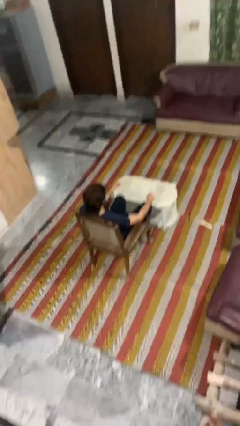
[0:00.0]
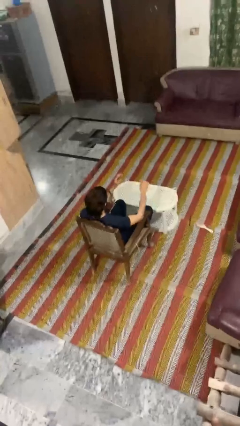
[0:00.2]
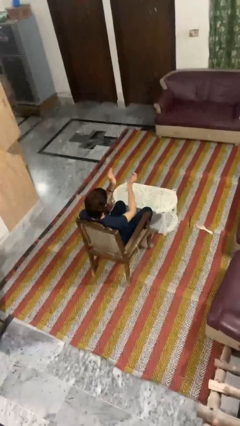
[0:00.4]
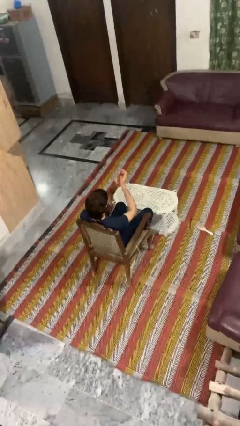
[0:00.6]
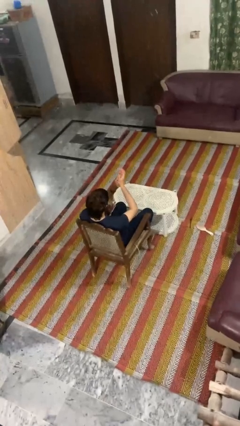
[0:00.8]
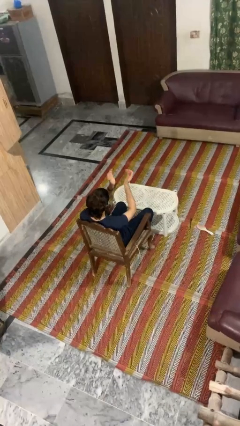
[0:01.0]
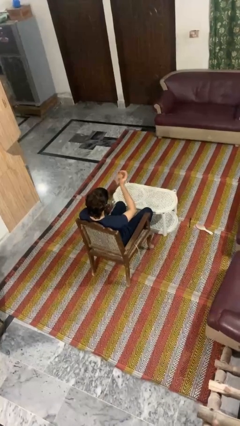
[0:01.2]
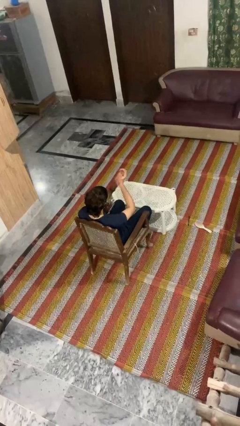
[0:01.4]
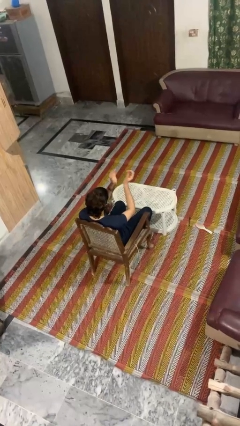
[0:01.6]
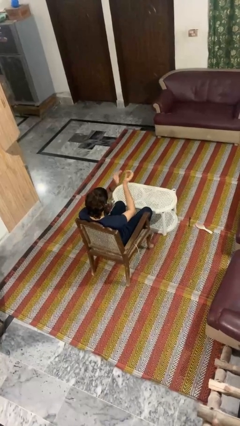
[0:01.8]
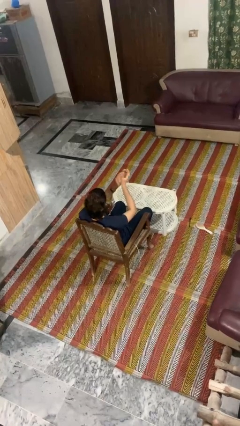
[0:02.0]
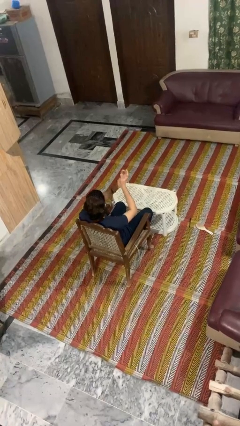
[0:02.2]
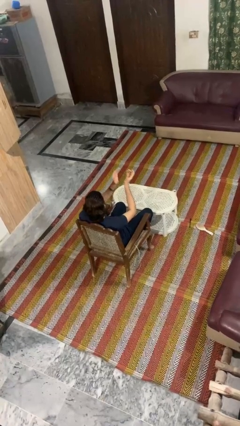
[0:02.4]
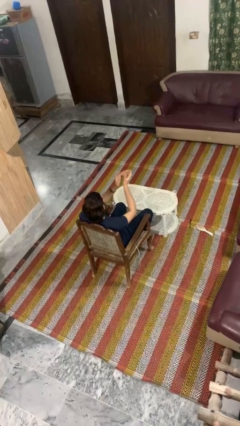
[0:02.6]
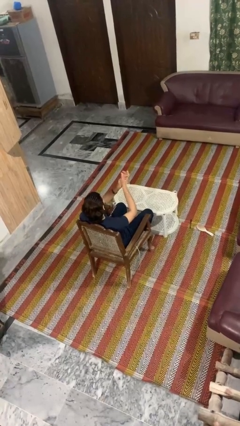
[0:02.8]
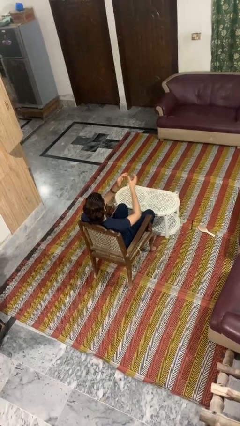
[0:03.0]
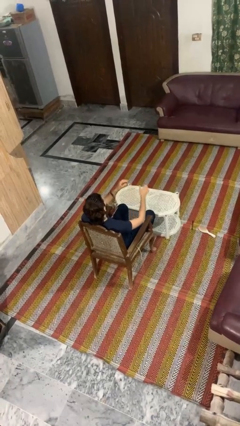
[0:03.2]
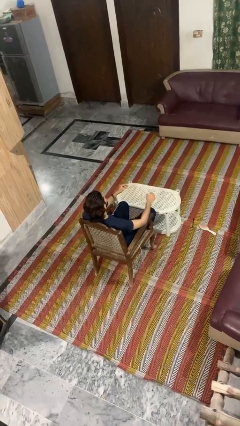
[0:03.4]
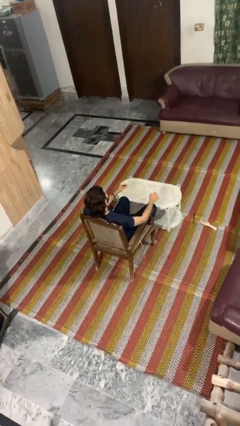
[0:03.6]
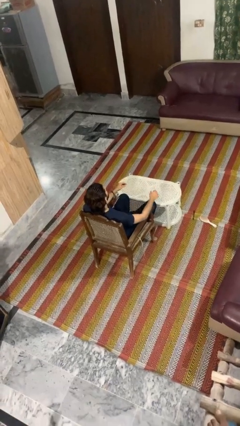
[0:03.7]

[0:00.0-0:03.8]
person claps hands

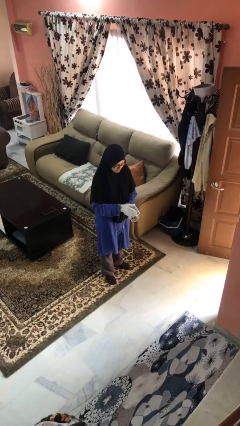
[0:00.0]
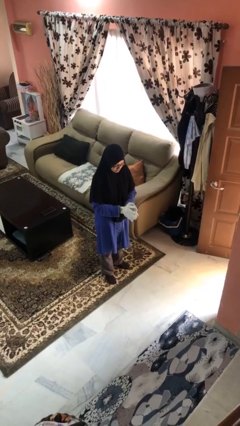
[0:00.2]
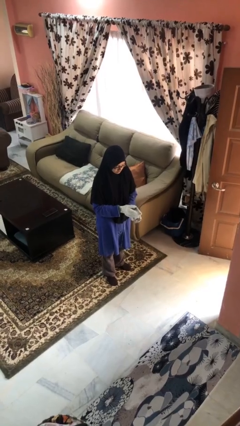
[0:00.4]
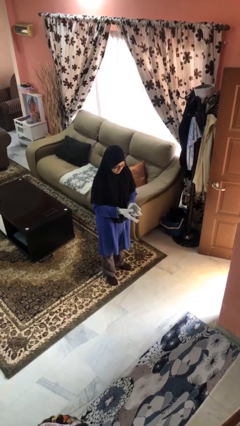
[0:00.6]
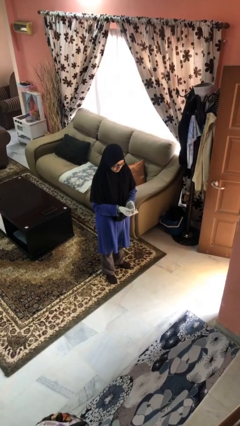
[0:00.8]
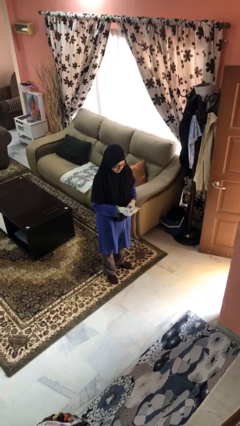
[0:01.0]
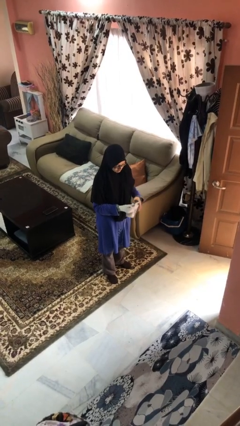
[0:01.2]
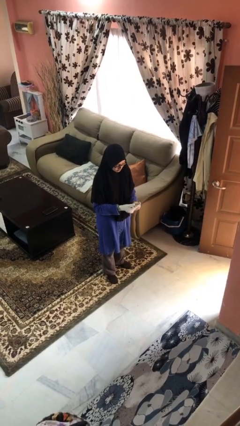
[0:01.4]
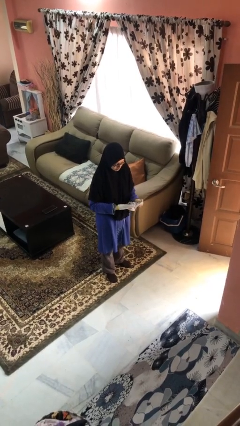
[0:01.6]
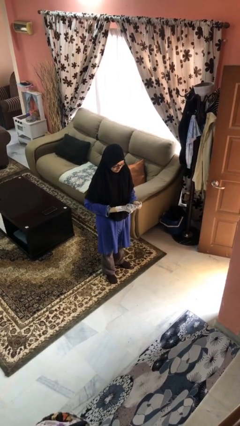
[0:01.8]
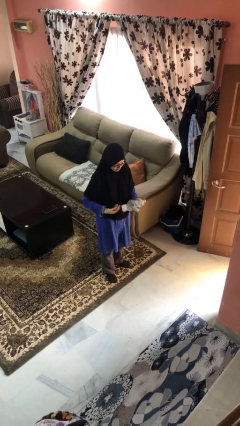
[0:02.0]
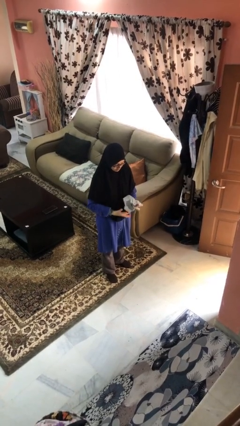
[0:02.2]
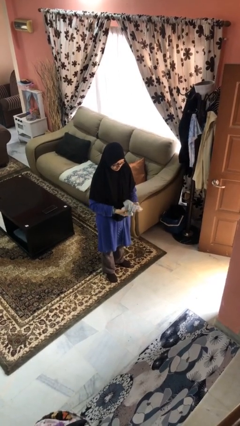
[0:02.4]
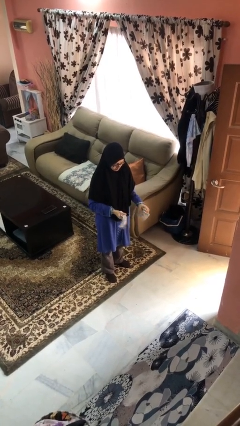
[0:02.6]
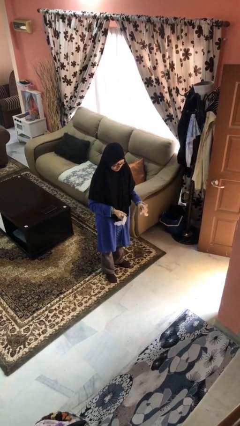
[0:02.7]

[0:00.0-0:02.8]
person takes off gloves

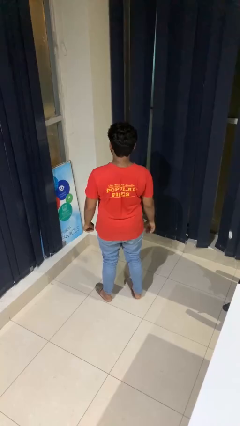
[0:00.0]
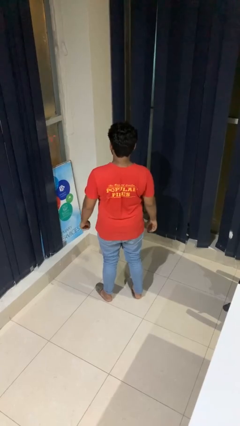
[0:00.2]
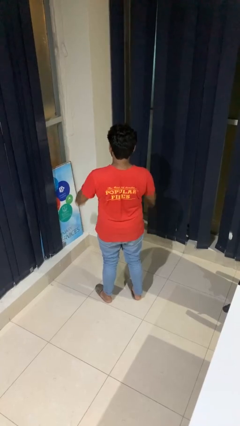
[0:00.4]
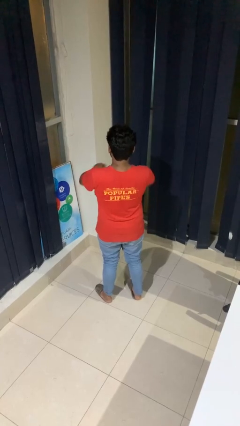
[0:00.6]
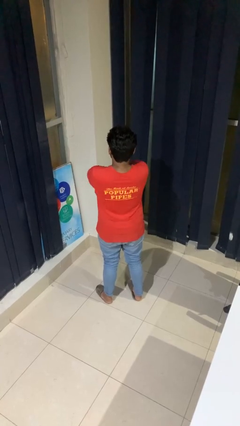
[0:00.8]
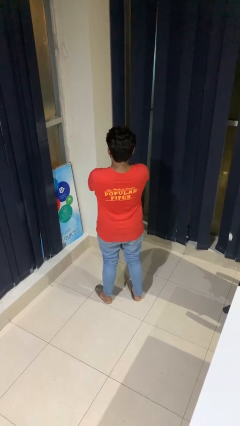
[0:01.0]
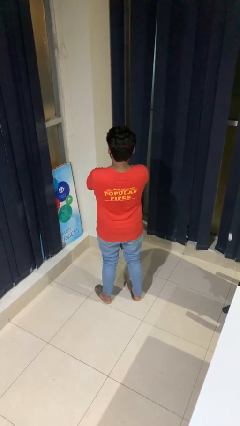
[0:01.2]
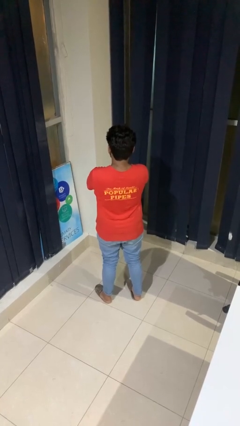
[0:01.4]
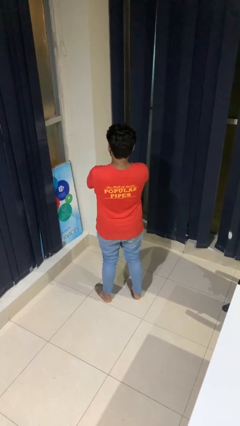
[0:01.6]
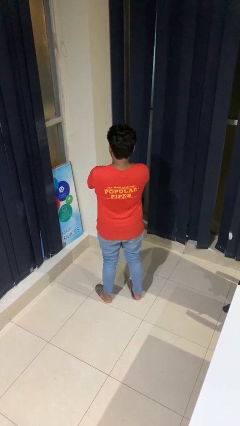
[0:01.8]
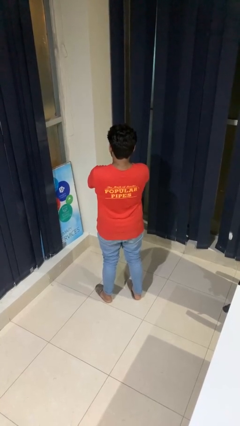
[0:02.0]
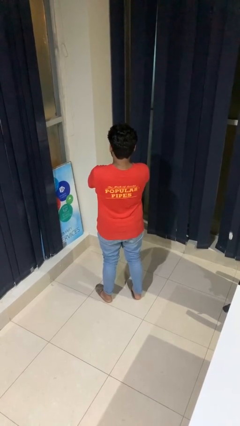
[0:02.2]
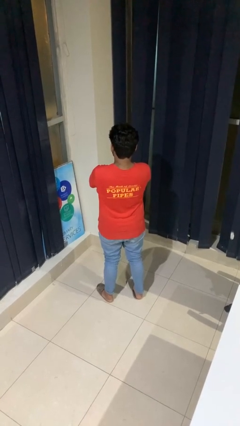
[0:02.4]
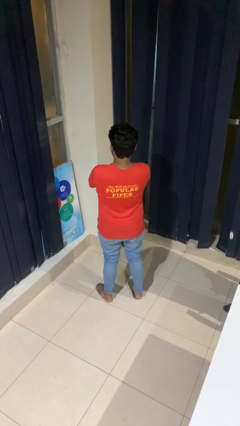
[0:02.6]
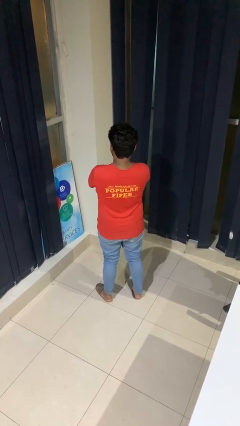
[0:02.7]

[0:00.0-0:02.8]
person crosses arms

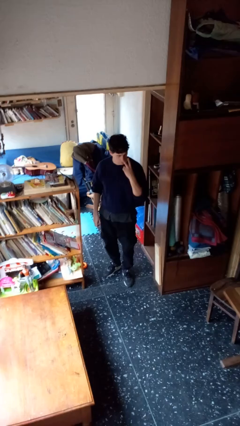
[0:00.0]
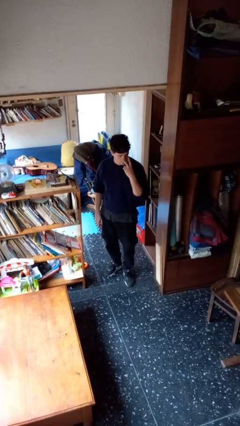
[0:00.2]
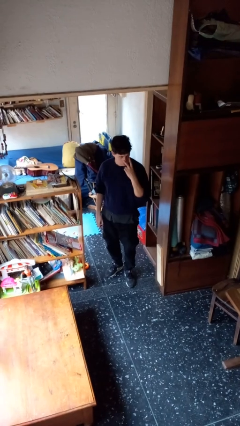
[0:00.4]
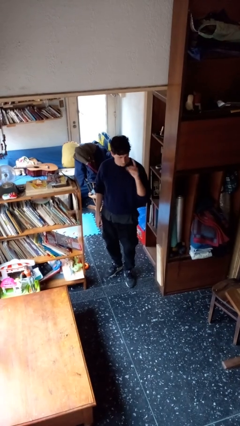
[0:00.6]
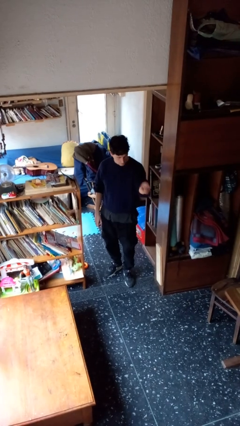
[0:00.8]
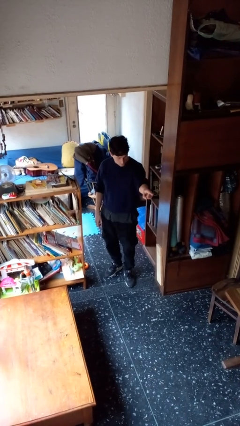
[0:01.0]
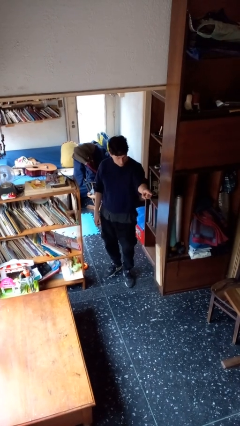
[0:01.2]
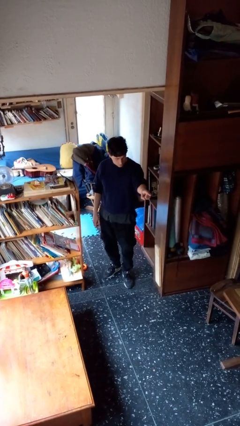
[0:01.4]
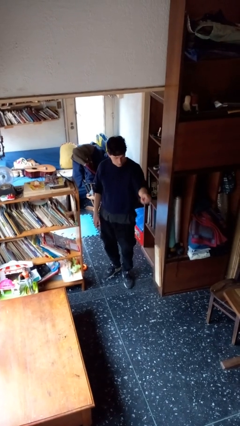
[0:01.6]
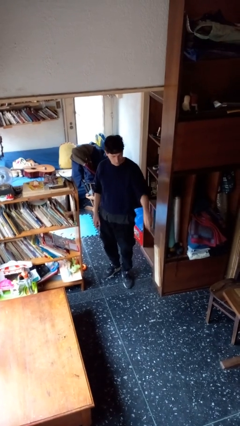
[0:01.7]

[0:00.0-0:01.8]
person gestures watch closely

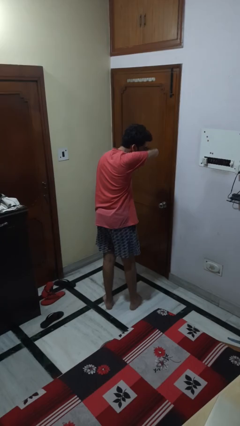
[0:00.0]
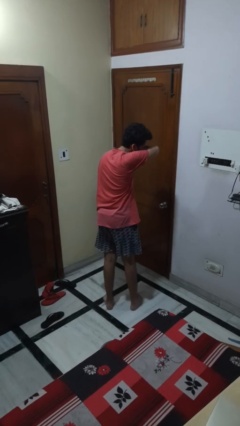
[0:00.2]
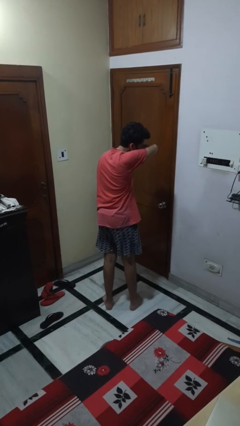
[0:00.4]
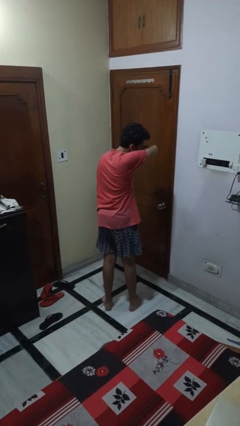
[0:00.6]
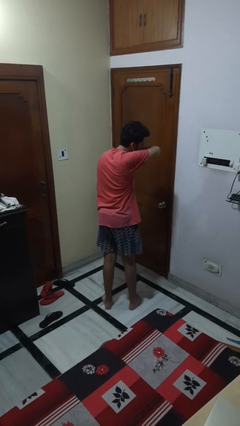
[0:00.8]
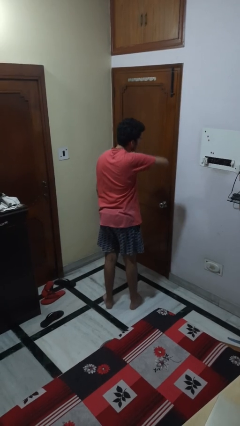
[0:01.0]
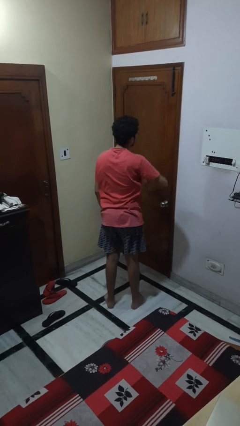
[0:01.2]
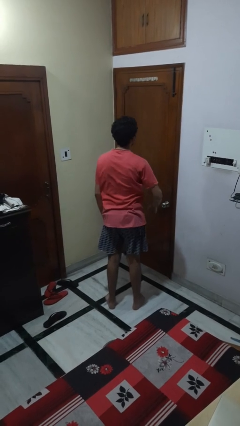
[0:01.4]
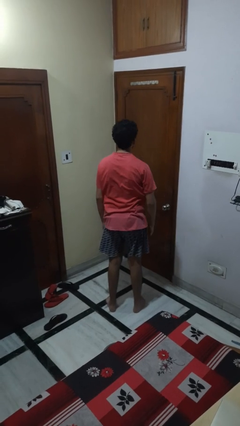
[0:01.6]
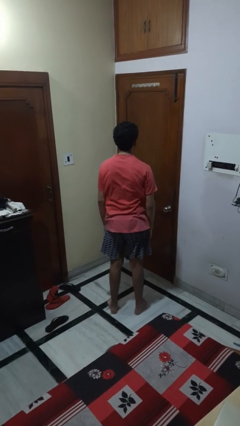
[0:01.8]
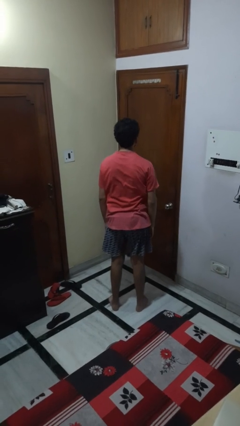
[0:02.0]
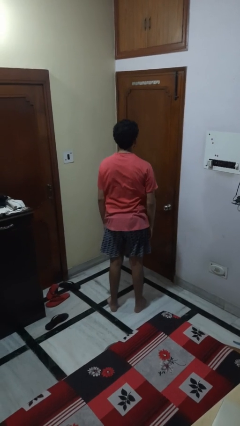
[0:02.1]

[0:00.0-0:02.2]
person sneezes into arm

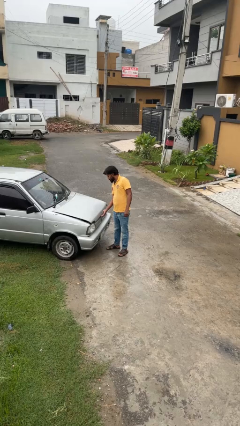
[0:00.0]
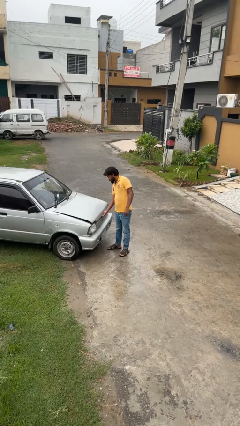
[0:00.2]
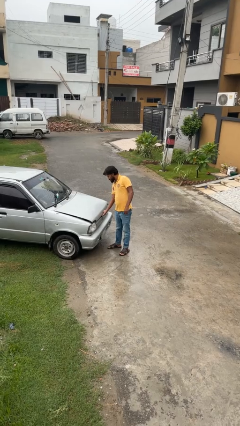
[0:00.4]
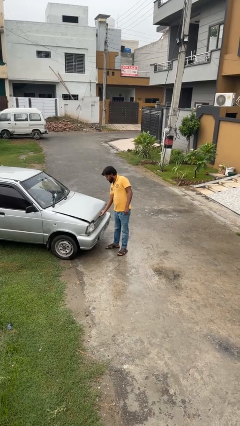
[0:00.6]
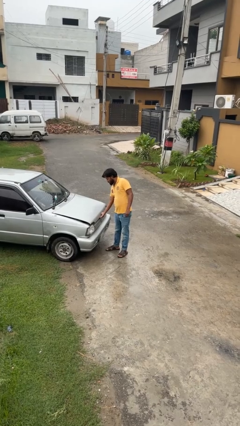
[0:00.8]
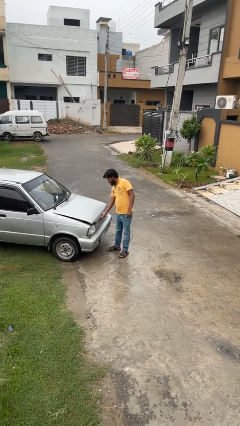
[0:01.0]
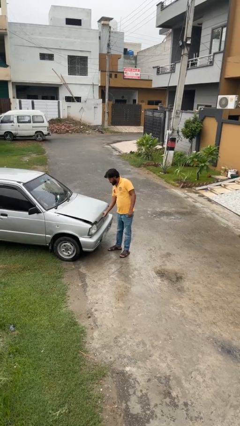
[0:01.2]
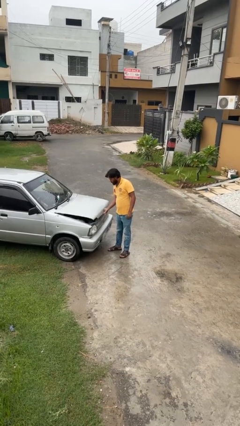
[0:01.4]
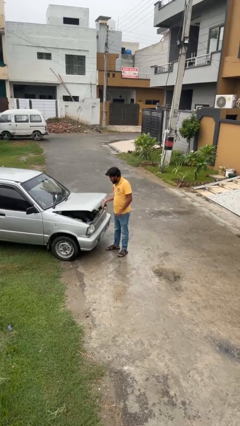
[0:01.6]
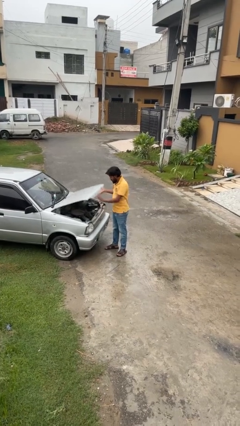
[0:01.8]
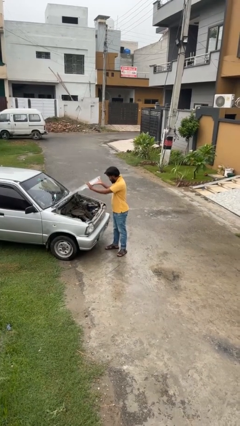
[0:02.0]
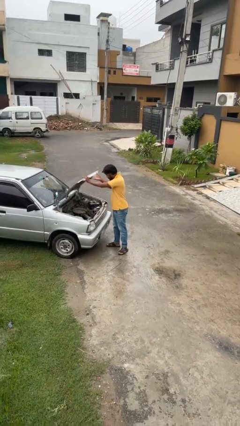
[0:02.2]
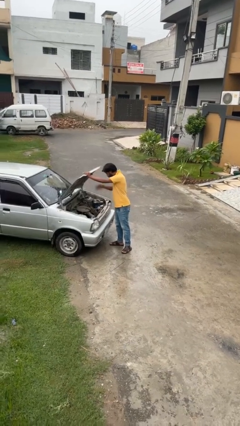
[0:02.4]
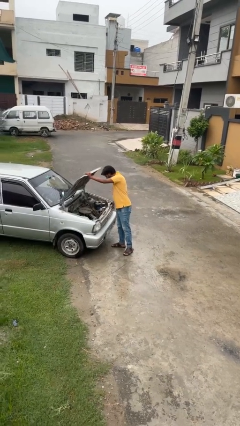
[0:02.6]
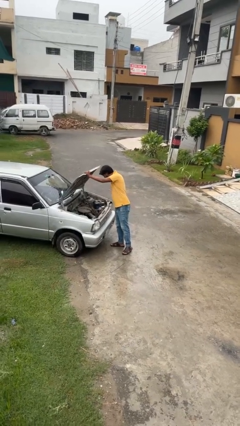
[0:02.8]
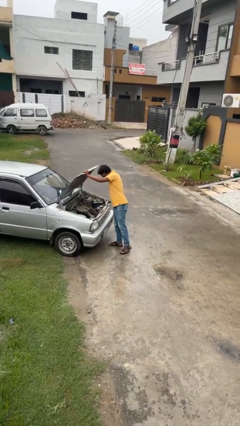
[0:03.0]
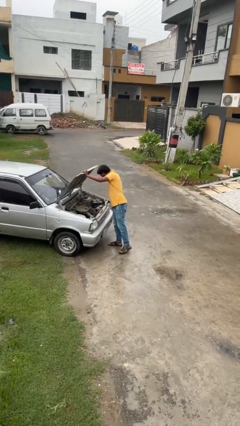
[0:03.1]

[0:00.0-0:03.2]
person opens car hood

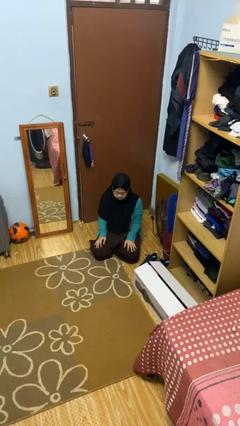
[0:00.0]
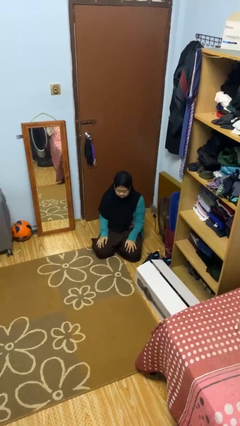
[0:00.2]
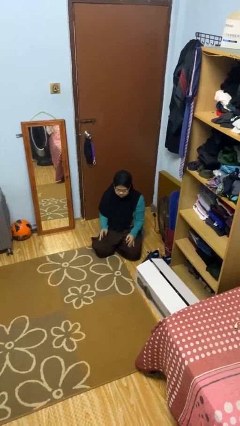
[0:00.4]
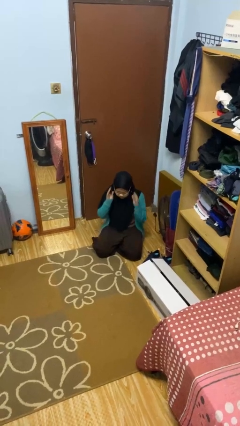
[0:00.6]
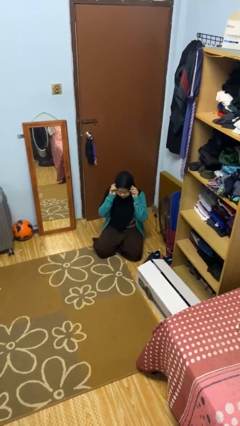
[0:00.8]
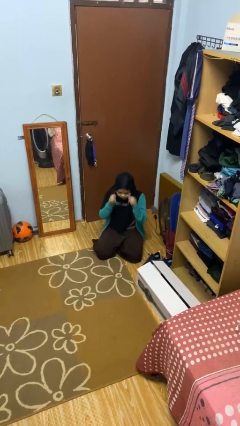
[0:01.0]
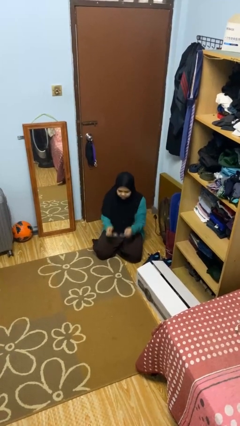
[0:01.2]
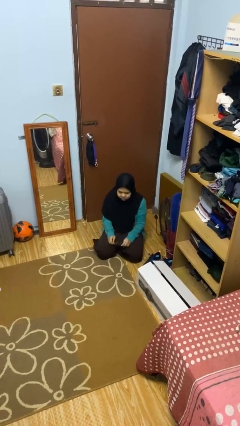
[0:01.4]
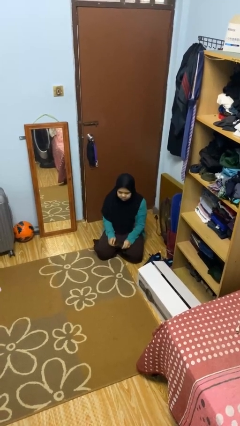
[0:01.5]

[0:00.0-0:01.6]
person takes off glasses
